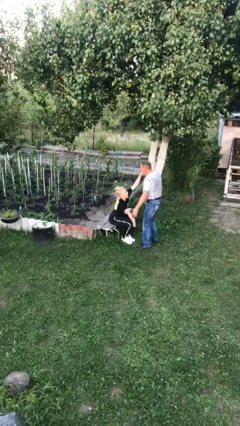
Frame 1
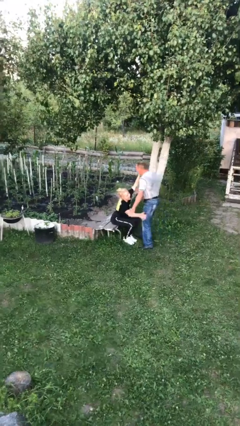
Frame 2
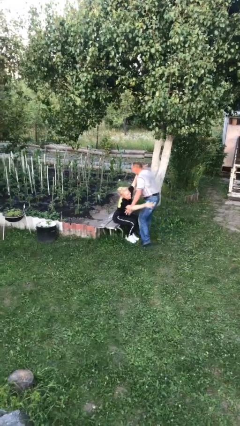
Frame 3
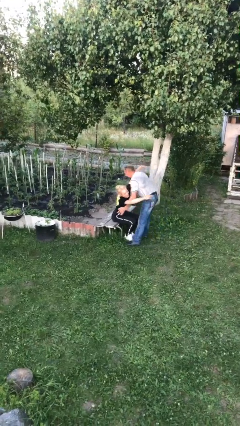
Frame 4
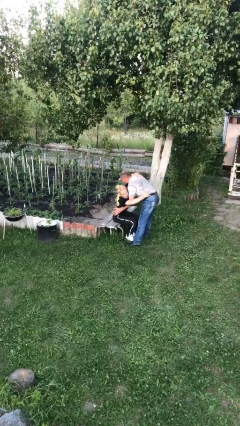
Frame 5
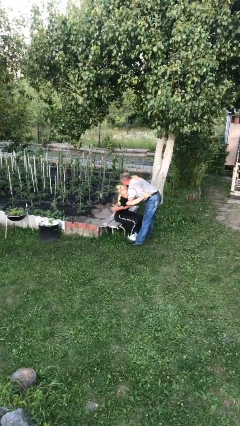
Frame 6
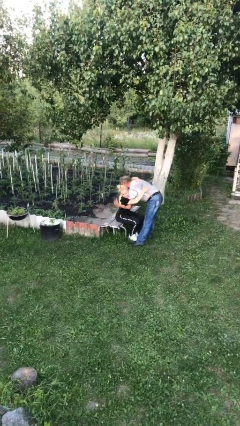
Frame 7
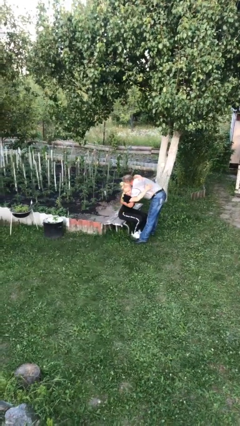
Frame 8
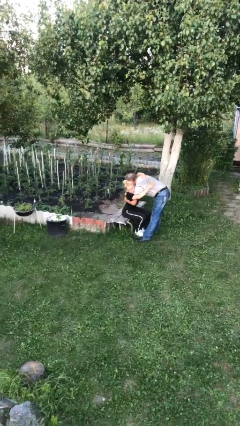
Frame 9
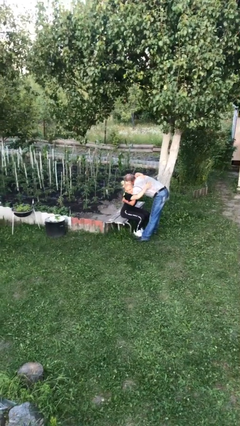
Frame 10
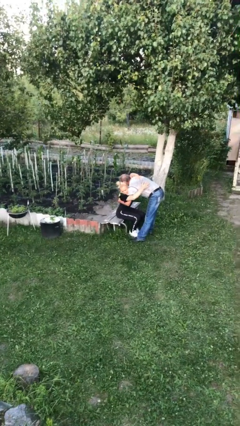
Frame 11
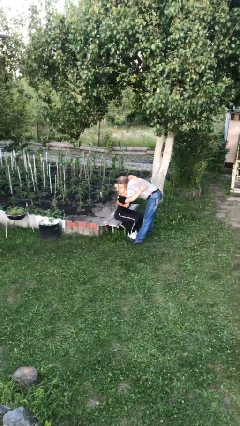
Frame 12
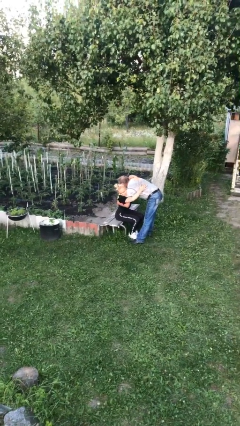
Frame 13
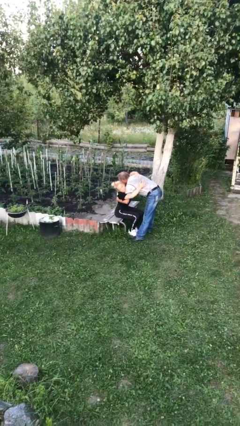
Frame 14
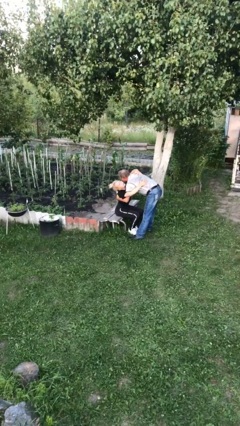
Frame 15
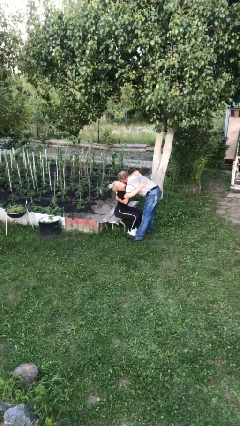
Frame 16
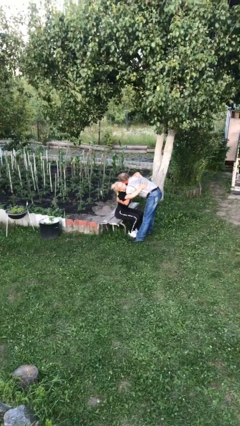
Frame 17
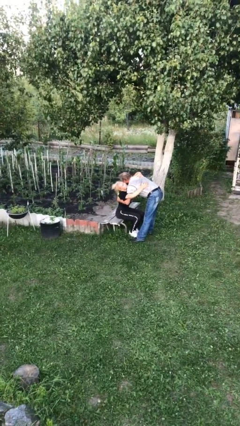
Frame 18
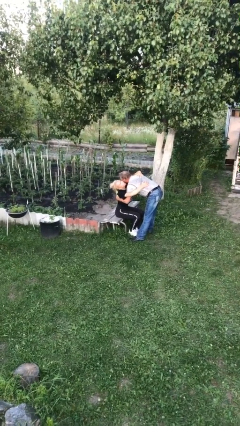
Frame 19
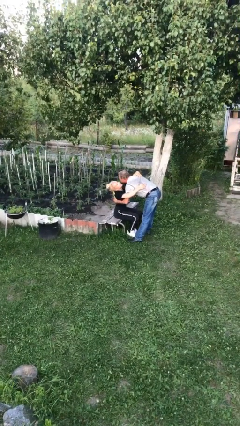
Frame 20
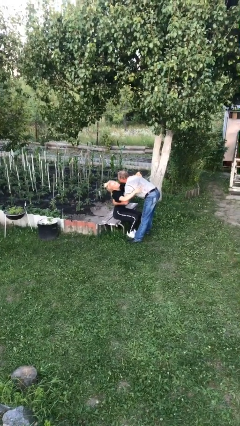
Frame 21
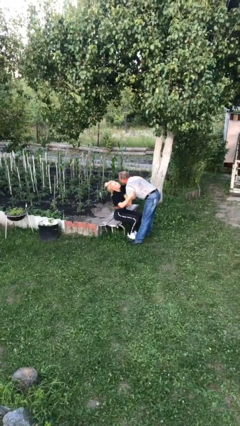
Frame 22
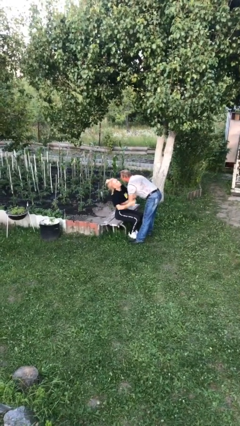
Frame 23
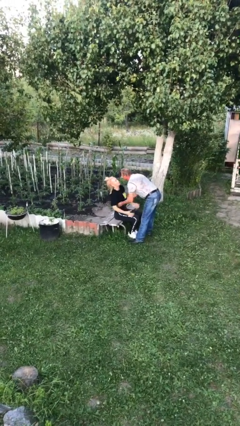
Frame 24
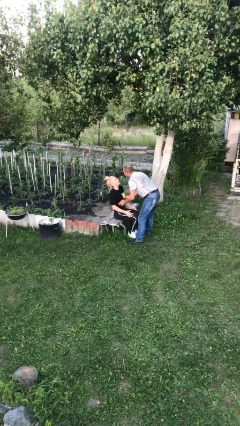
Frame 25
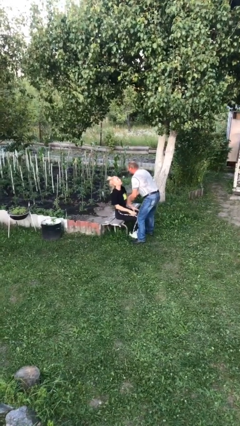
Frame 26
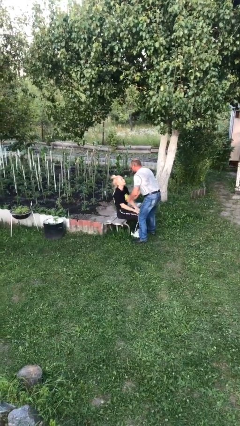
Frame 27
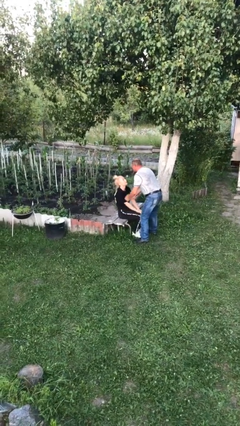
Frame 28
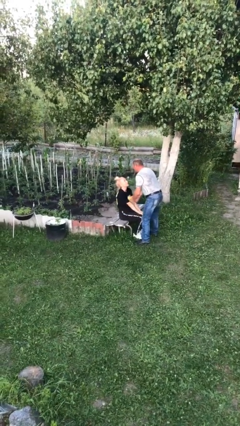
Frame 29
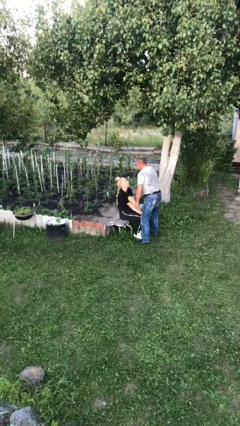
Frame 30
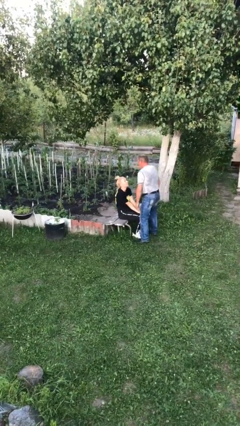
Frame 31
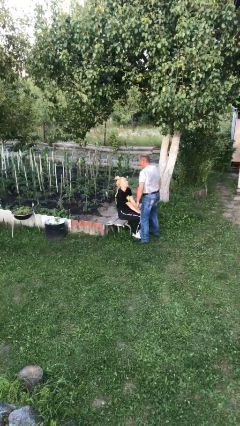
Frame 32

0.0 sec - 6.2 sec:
person embraces person

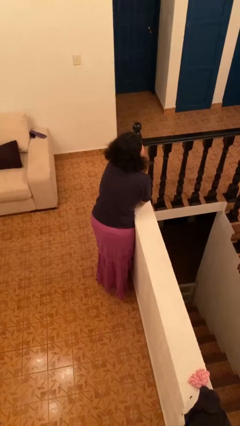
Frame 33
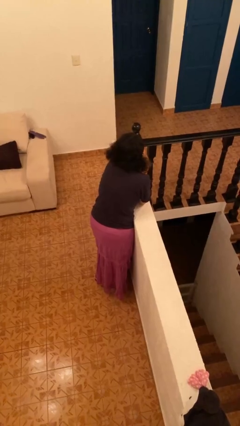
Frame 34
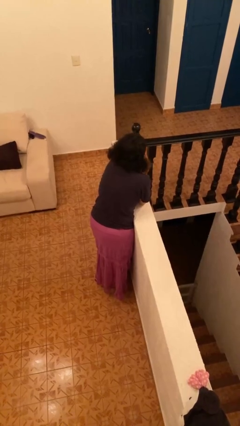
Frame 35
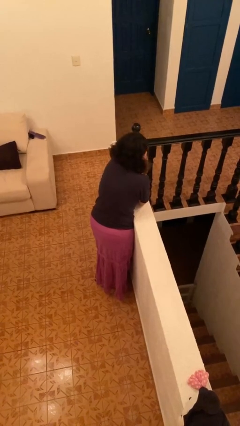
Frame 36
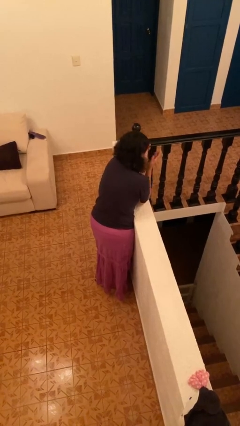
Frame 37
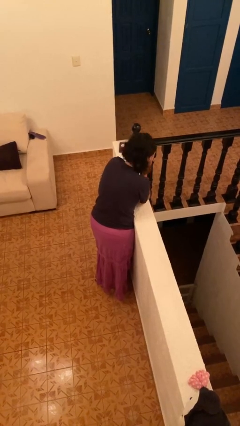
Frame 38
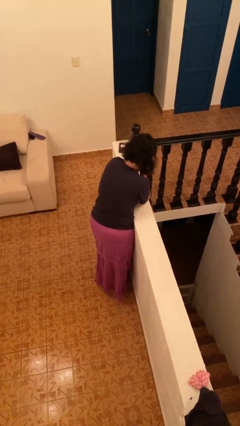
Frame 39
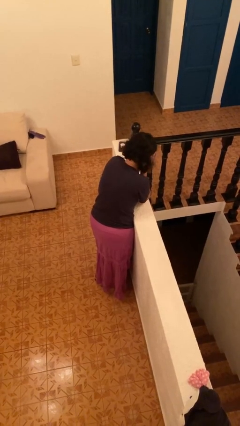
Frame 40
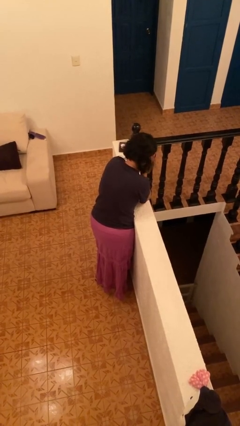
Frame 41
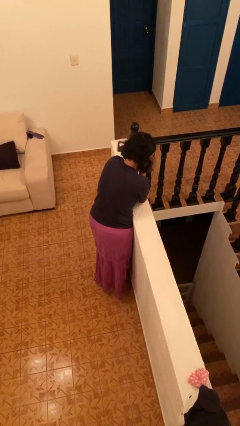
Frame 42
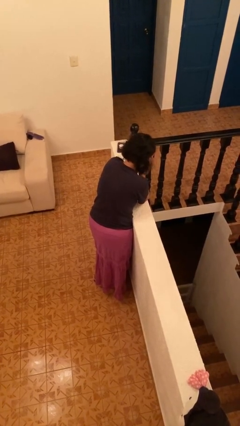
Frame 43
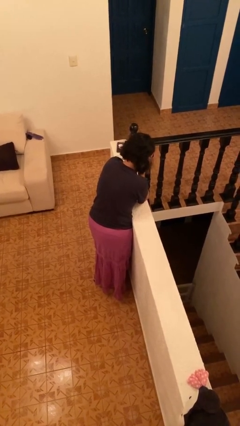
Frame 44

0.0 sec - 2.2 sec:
person covers face with hands

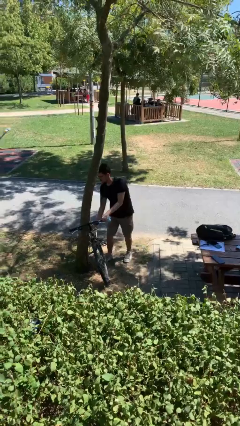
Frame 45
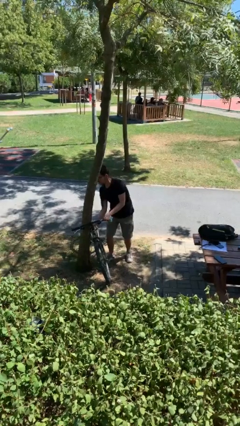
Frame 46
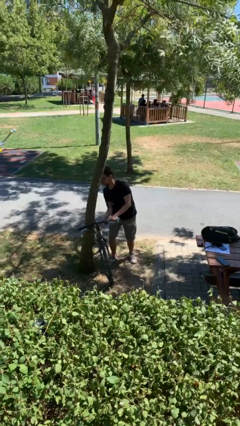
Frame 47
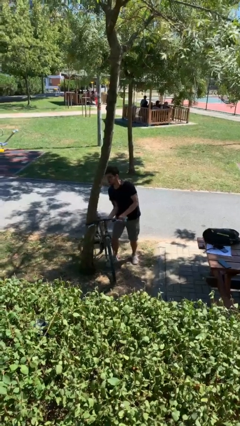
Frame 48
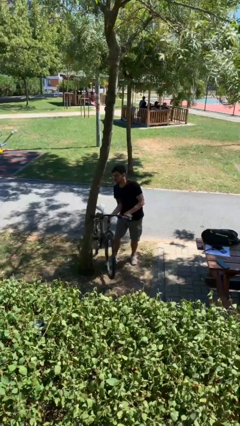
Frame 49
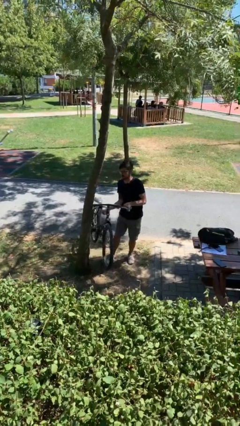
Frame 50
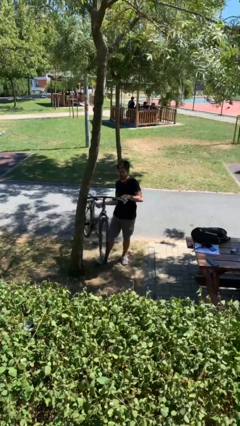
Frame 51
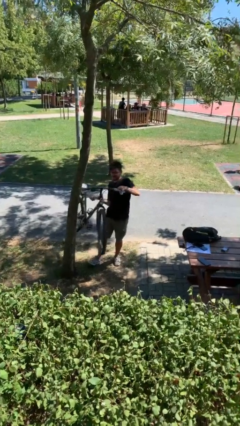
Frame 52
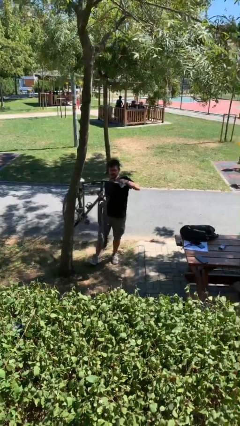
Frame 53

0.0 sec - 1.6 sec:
person picks up object from floor

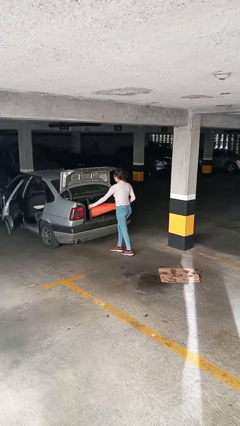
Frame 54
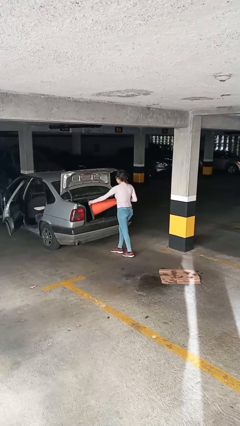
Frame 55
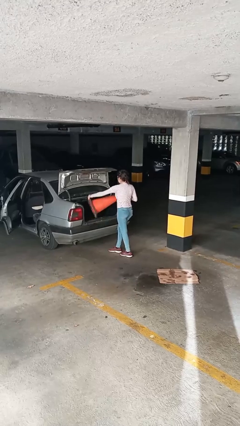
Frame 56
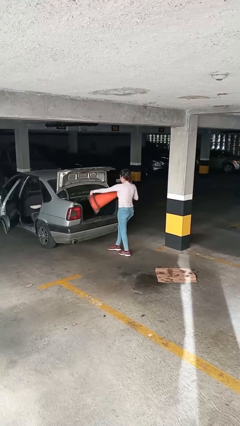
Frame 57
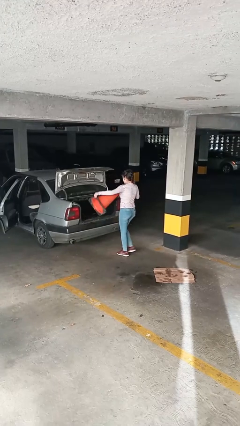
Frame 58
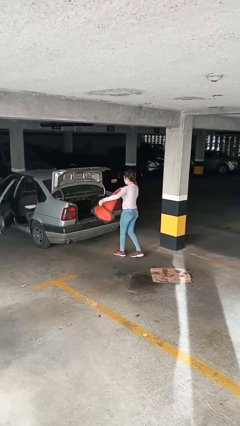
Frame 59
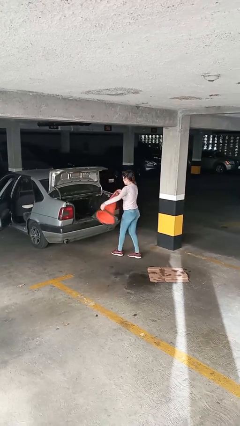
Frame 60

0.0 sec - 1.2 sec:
person unloads car

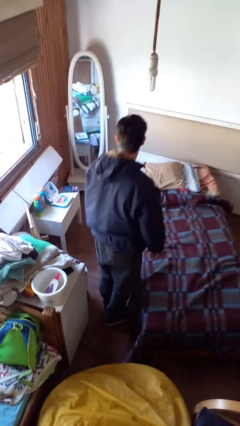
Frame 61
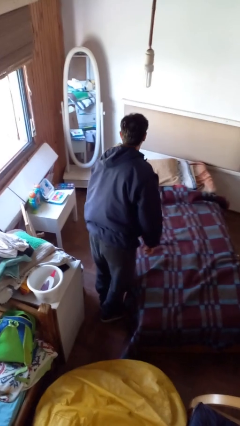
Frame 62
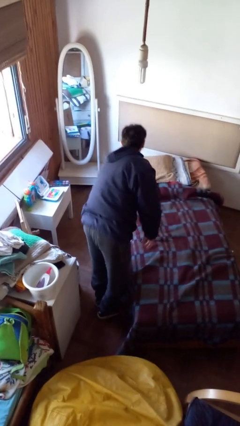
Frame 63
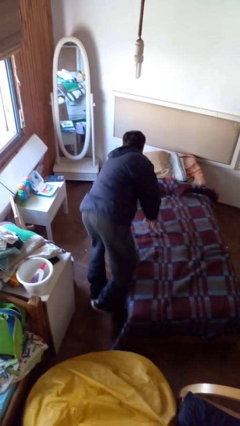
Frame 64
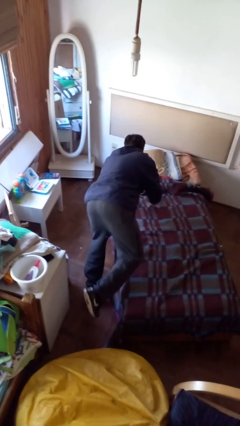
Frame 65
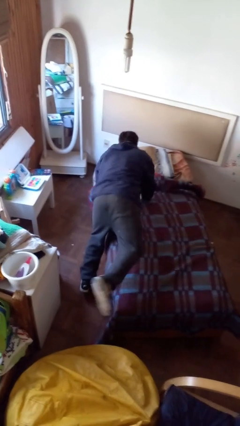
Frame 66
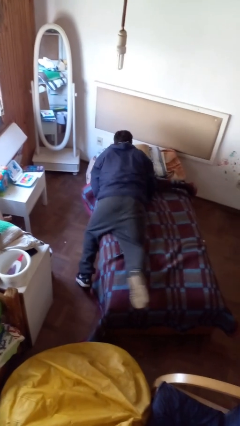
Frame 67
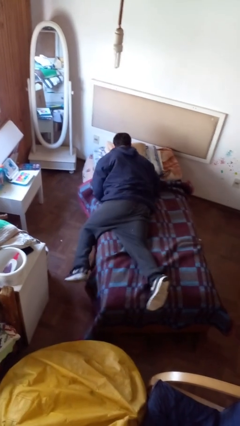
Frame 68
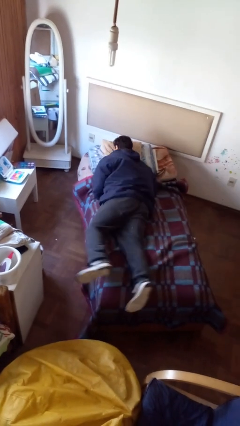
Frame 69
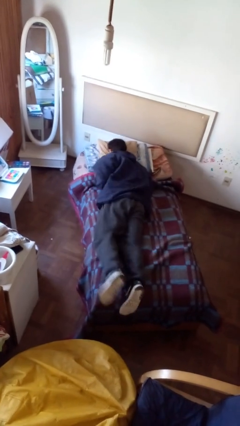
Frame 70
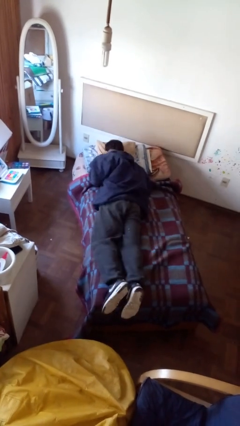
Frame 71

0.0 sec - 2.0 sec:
person lies down on bed

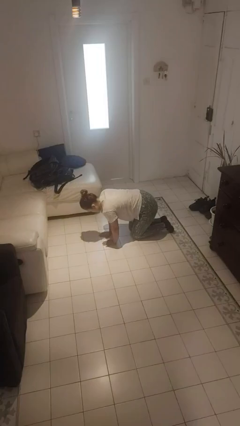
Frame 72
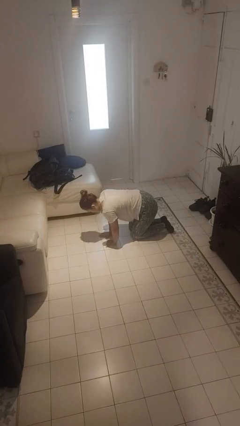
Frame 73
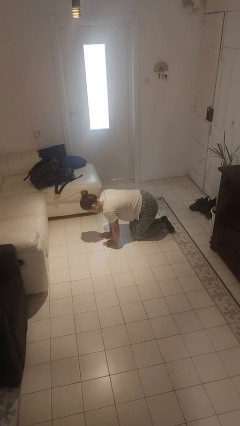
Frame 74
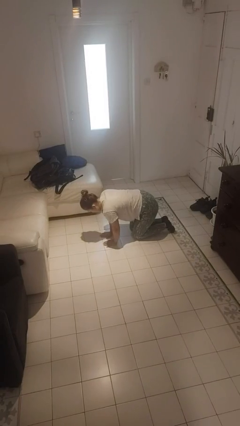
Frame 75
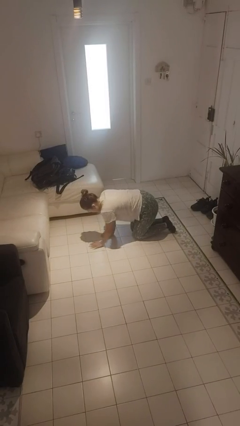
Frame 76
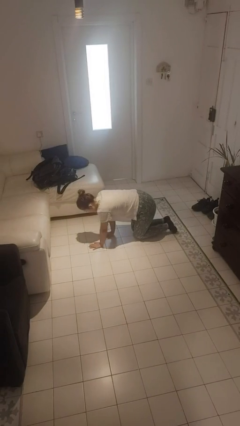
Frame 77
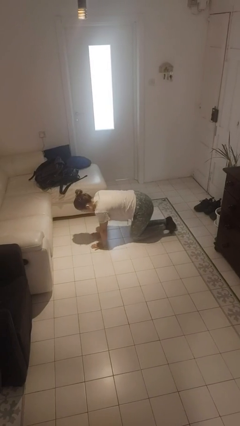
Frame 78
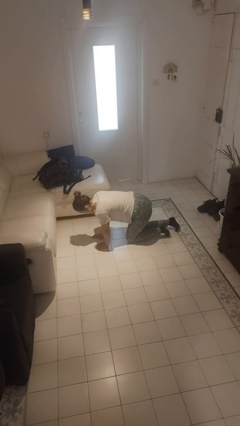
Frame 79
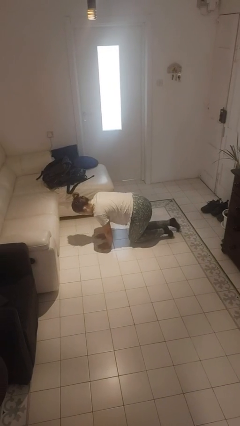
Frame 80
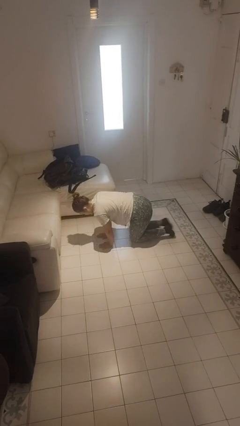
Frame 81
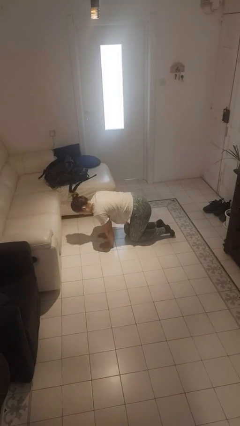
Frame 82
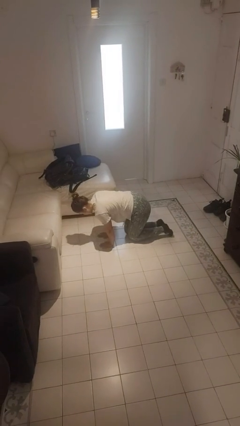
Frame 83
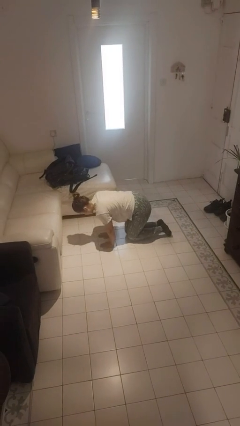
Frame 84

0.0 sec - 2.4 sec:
person crawls

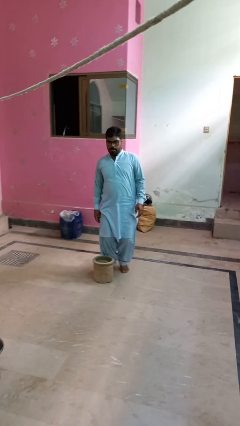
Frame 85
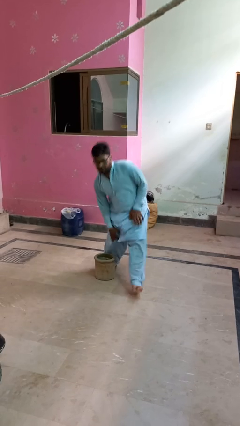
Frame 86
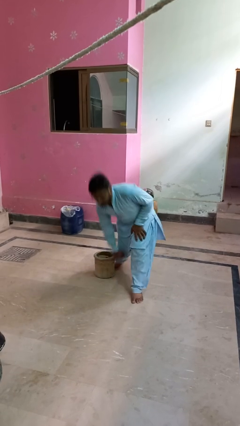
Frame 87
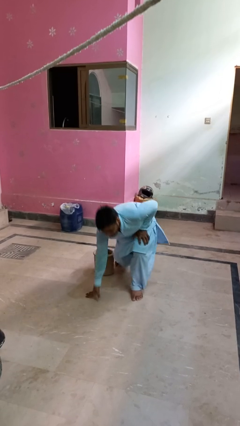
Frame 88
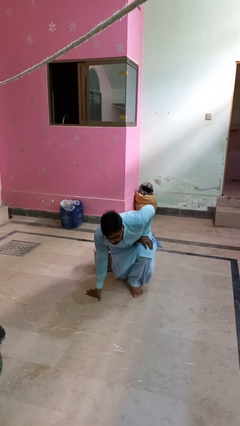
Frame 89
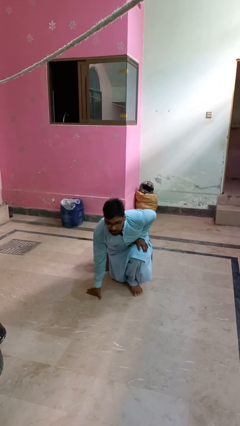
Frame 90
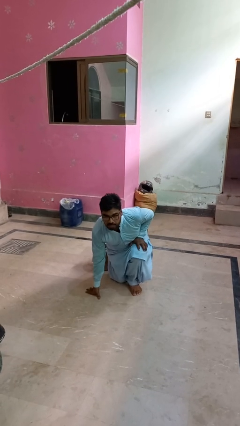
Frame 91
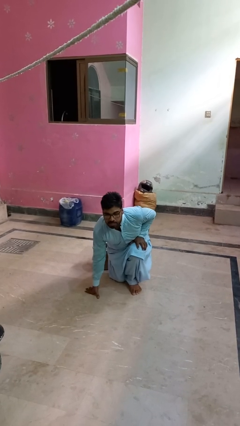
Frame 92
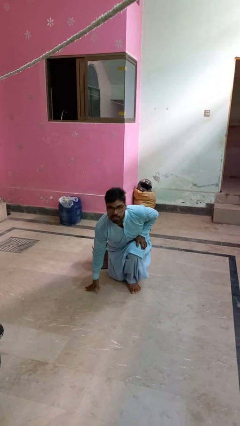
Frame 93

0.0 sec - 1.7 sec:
person trips on object on floor
